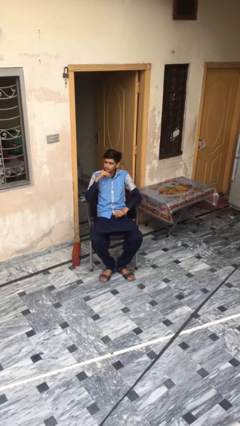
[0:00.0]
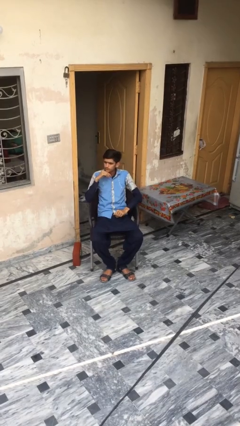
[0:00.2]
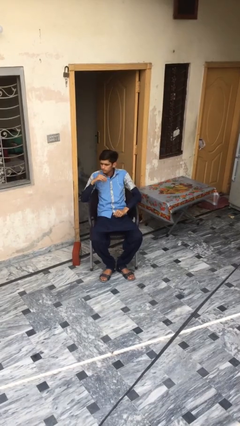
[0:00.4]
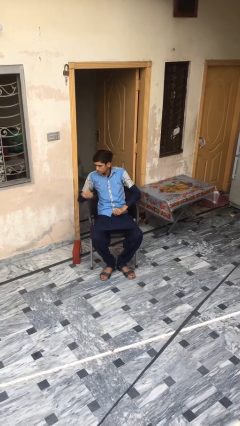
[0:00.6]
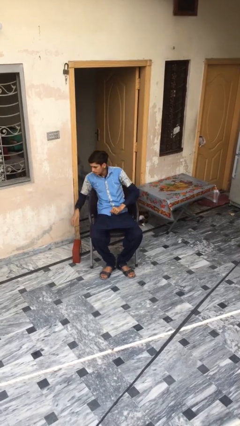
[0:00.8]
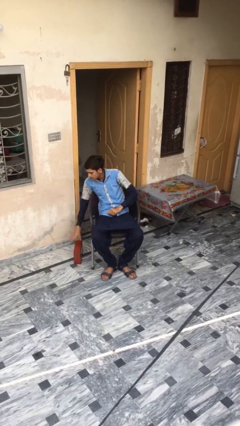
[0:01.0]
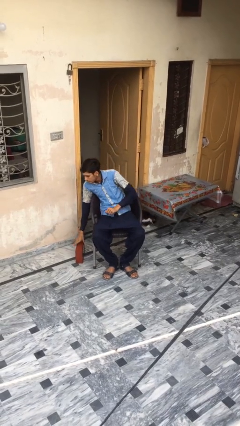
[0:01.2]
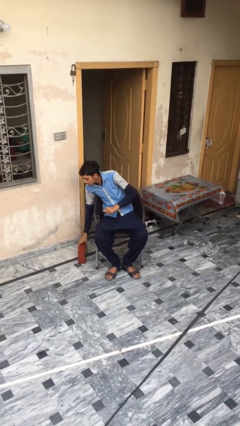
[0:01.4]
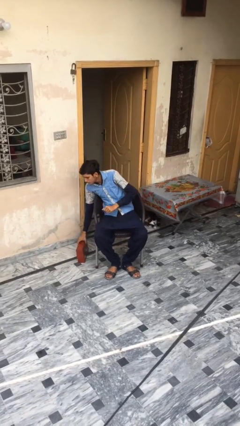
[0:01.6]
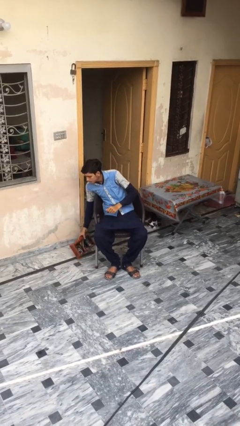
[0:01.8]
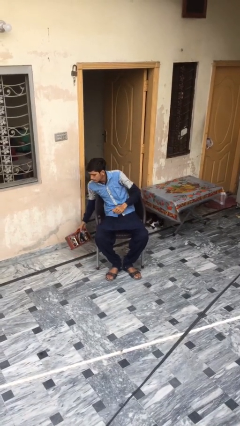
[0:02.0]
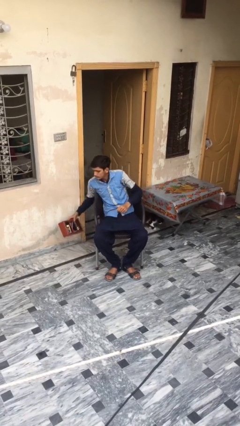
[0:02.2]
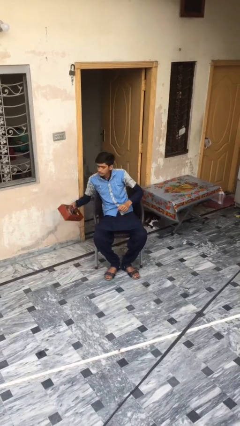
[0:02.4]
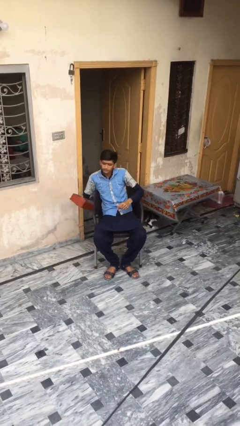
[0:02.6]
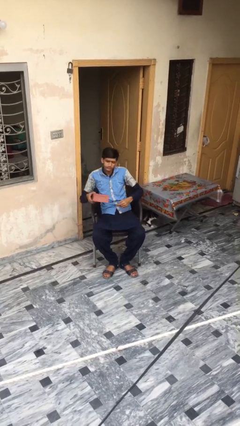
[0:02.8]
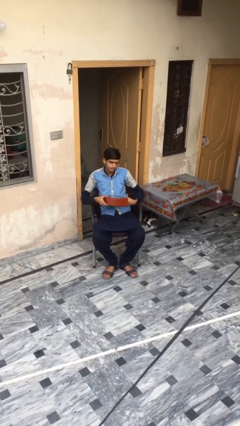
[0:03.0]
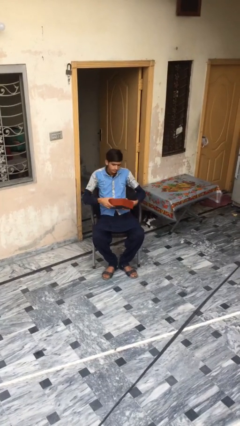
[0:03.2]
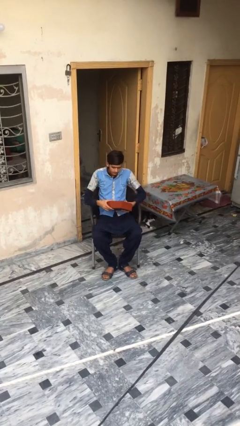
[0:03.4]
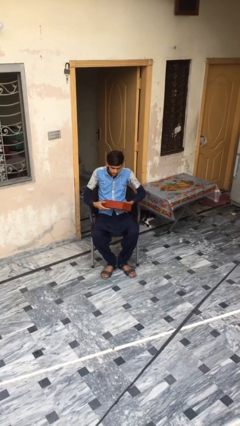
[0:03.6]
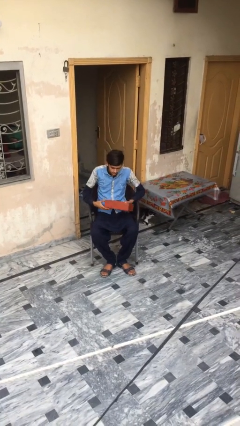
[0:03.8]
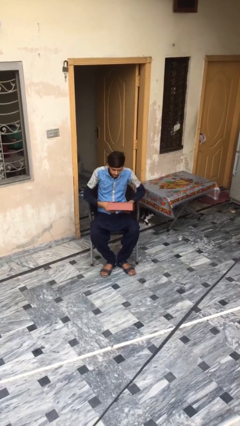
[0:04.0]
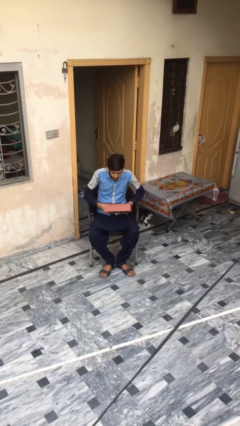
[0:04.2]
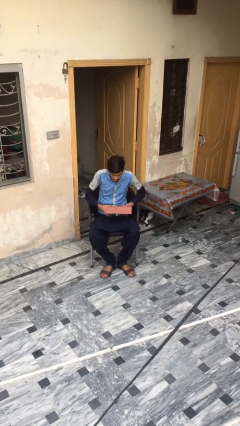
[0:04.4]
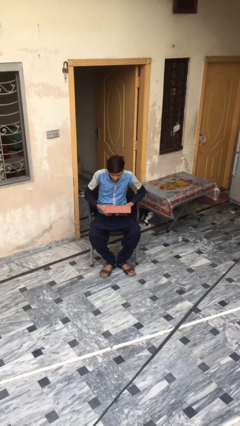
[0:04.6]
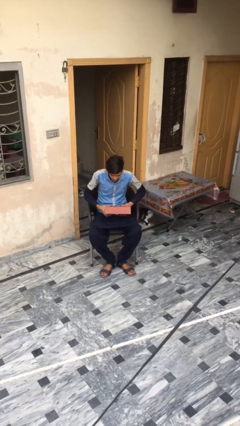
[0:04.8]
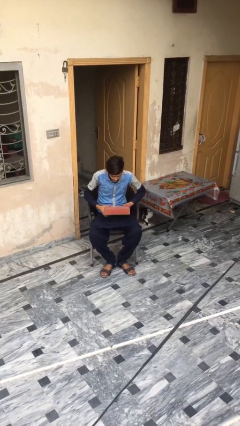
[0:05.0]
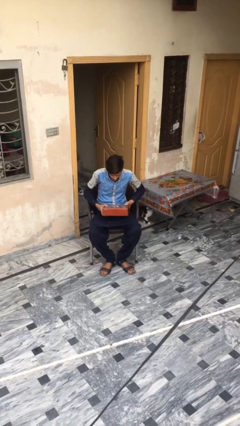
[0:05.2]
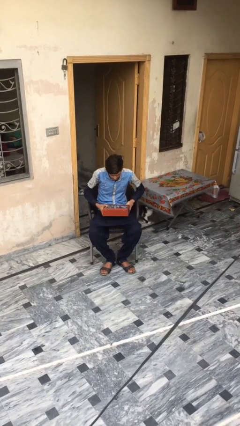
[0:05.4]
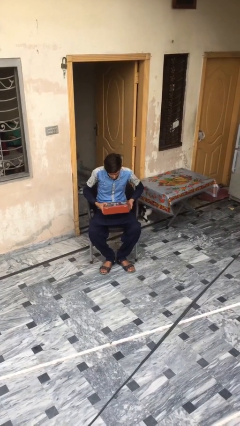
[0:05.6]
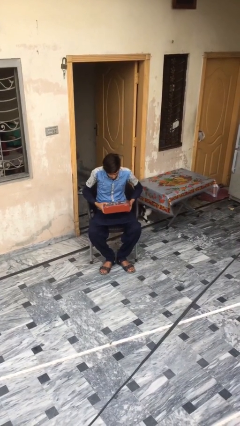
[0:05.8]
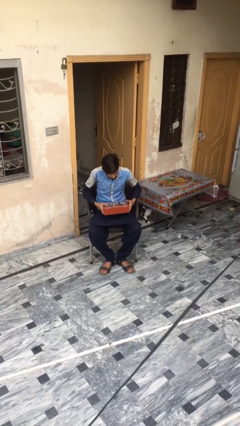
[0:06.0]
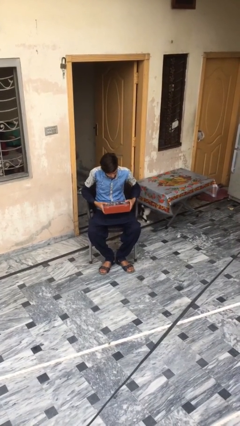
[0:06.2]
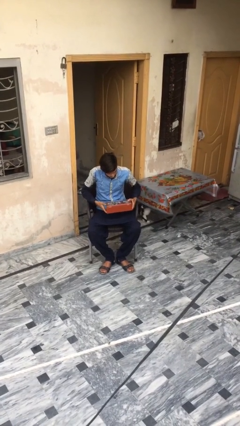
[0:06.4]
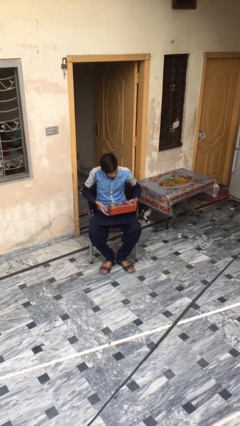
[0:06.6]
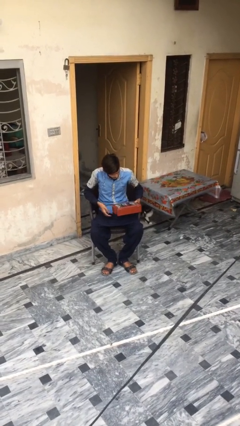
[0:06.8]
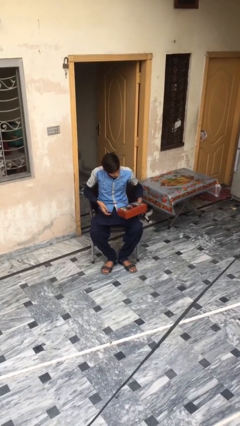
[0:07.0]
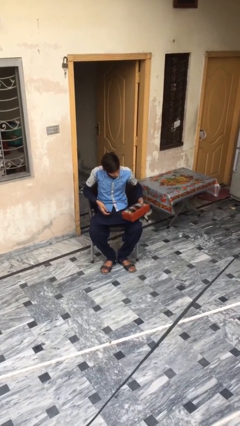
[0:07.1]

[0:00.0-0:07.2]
person picks up object from floor

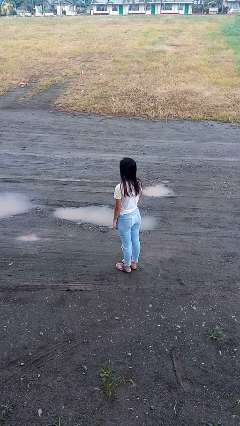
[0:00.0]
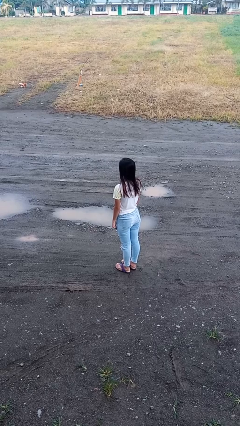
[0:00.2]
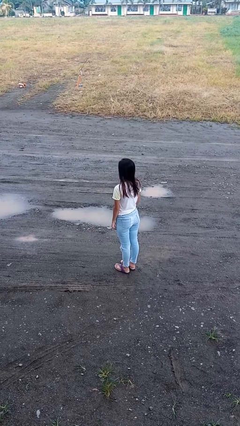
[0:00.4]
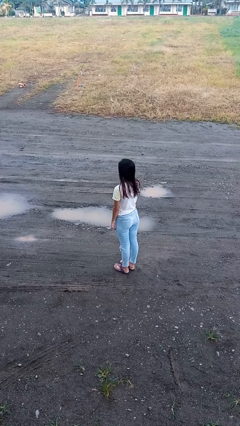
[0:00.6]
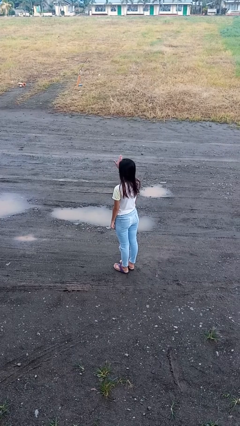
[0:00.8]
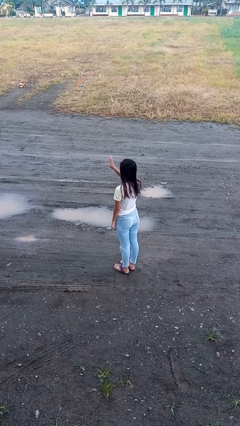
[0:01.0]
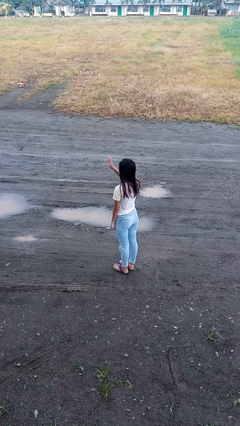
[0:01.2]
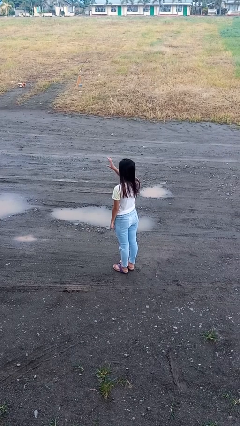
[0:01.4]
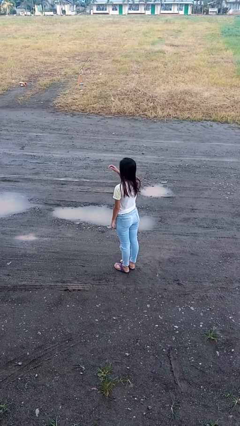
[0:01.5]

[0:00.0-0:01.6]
person gestures swipe left

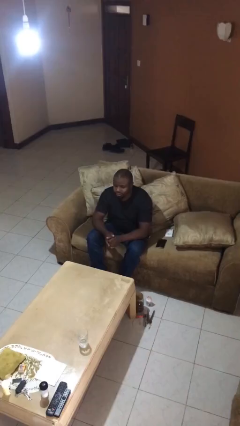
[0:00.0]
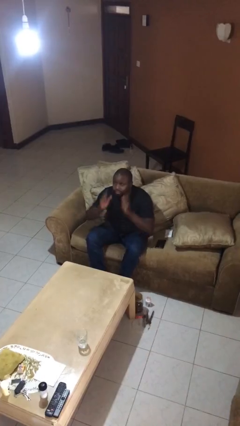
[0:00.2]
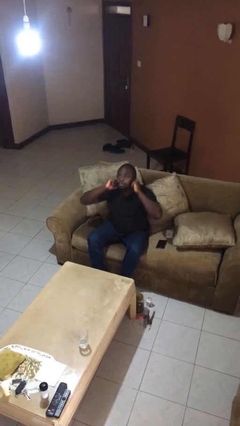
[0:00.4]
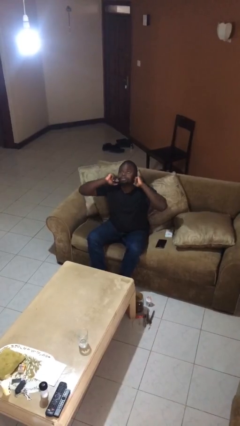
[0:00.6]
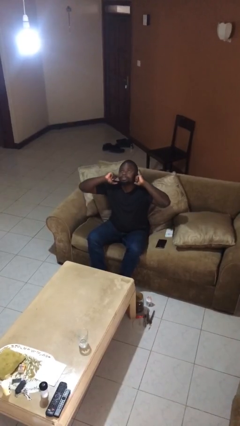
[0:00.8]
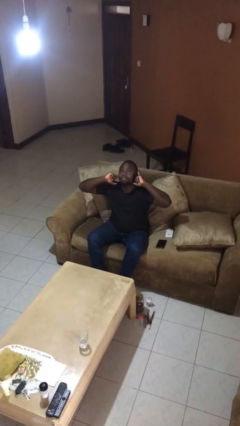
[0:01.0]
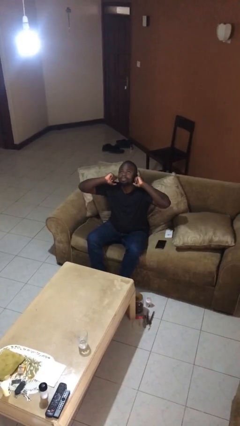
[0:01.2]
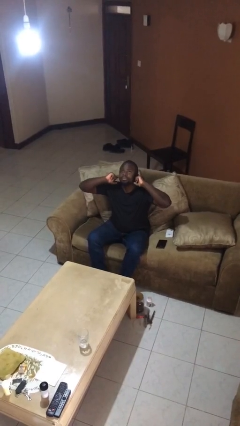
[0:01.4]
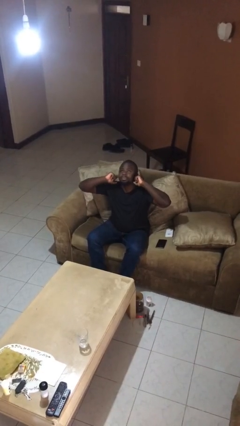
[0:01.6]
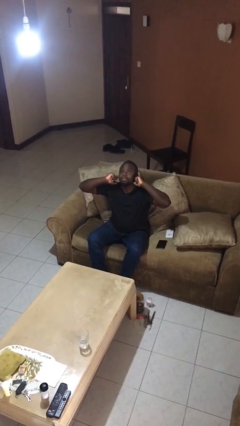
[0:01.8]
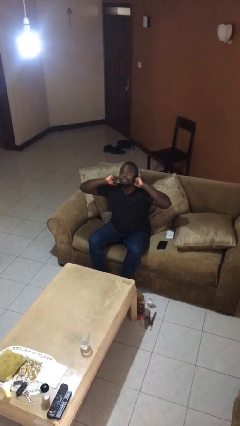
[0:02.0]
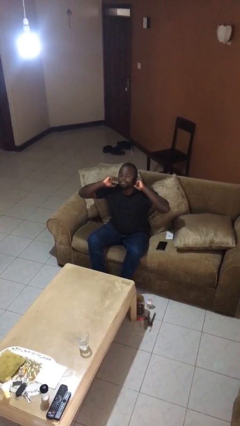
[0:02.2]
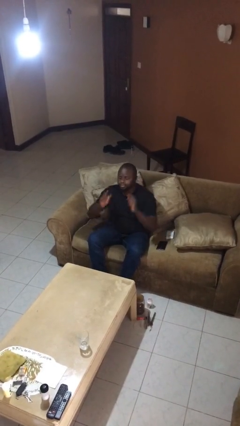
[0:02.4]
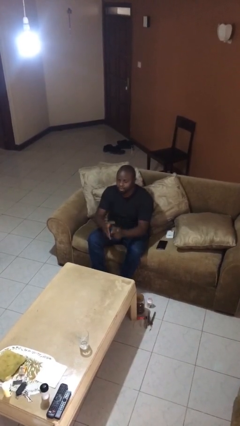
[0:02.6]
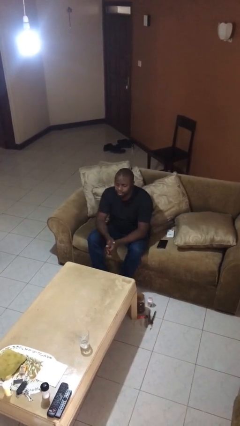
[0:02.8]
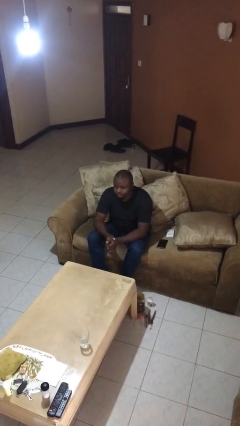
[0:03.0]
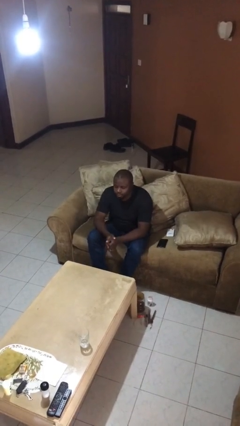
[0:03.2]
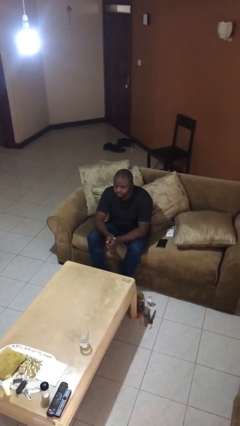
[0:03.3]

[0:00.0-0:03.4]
person puts fingers in ear

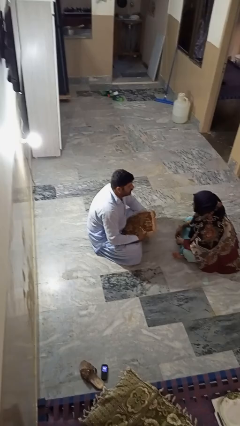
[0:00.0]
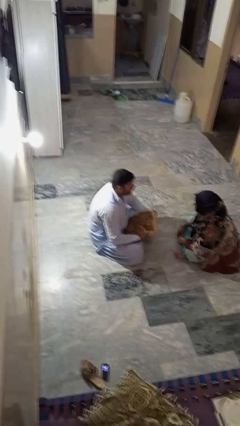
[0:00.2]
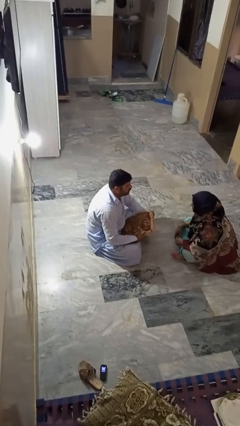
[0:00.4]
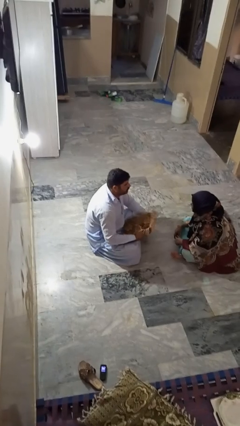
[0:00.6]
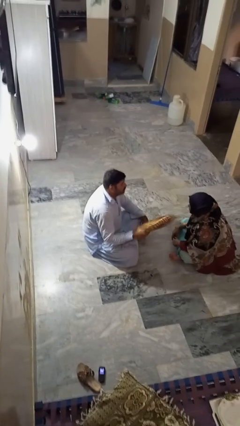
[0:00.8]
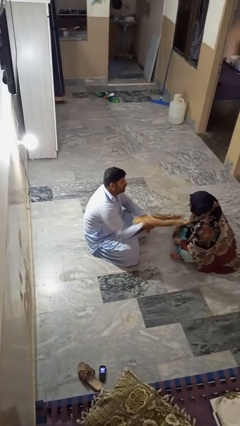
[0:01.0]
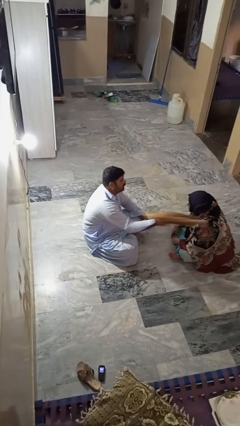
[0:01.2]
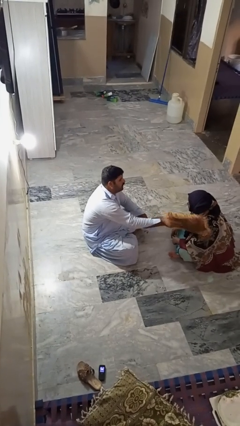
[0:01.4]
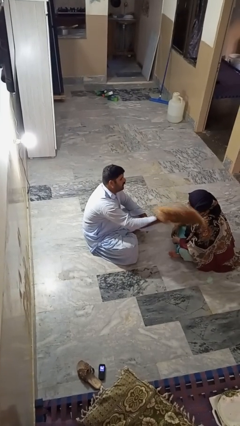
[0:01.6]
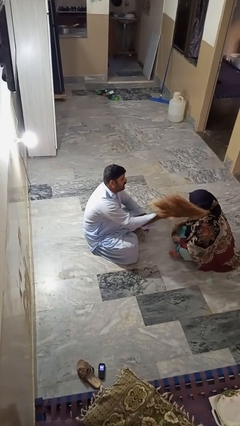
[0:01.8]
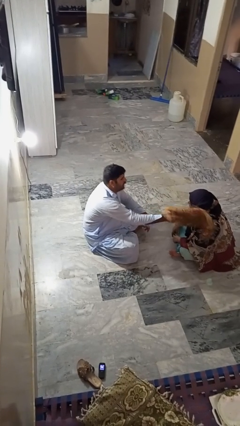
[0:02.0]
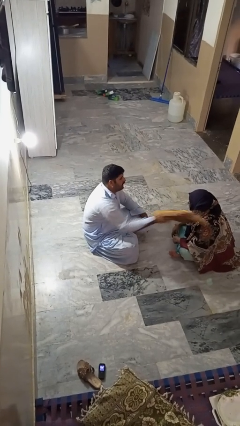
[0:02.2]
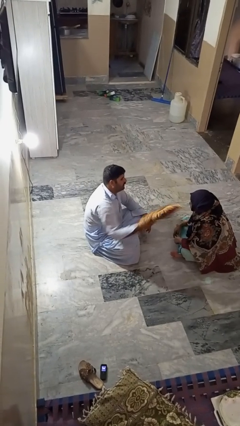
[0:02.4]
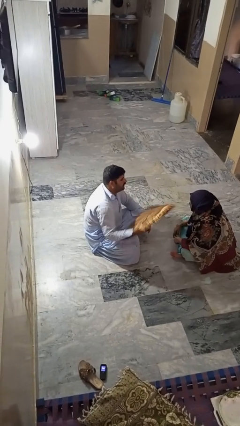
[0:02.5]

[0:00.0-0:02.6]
person hits person with pillow

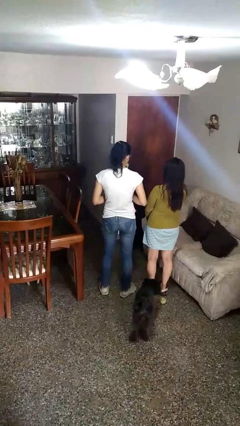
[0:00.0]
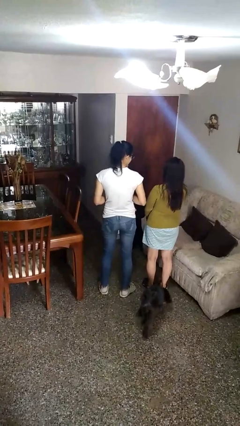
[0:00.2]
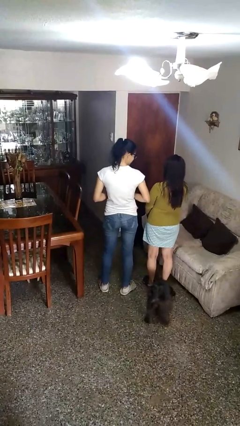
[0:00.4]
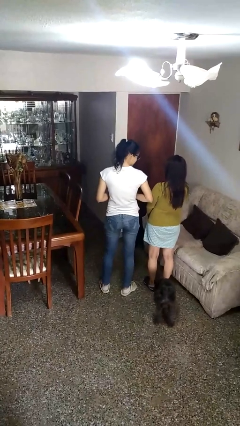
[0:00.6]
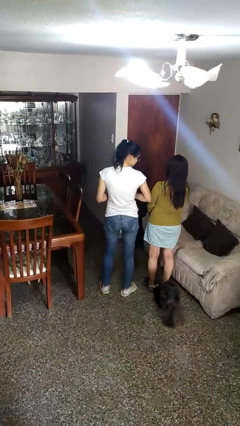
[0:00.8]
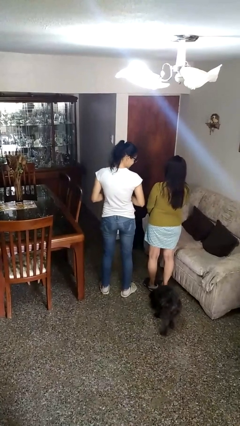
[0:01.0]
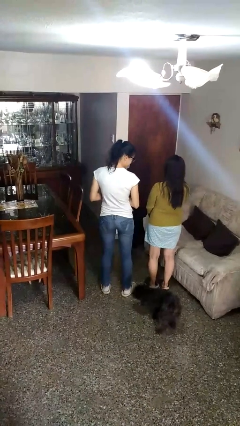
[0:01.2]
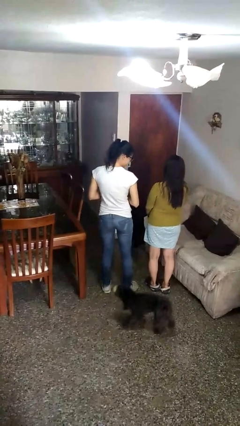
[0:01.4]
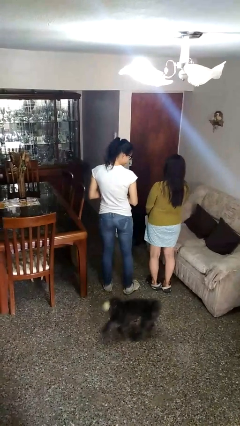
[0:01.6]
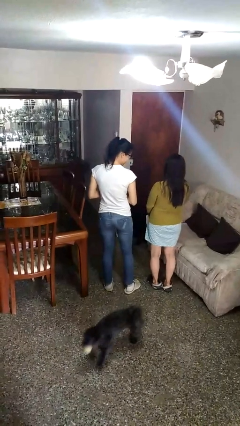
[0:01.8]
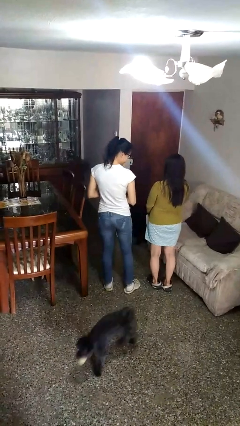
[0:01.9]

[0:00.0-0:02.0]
person nudges person with elbow

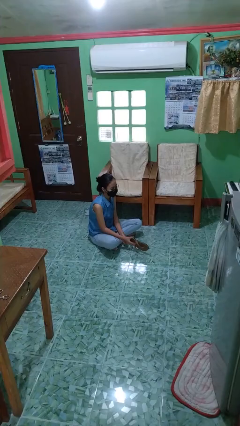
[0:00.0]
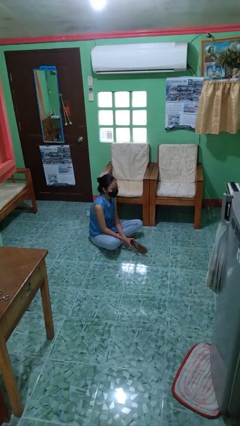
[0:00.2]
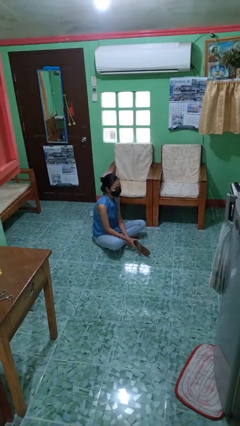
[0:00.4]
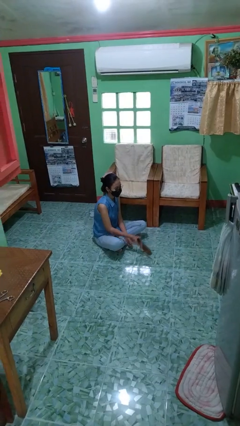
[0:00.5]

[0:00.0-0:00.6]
person throws object into air

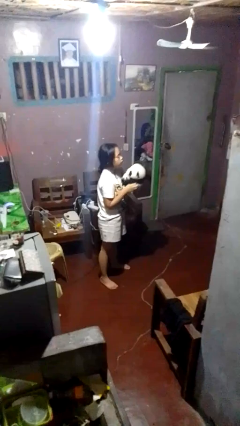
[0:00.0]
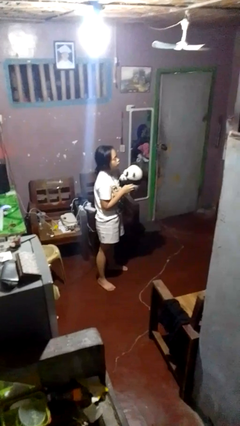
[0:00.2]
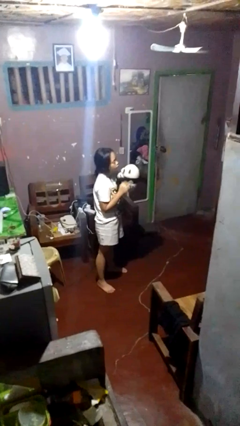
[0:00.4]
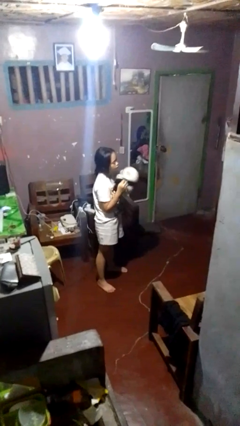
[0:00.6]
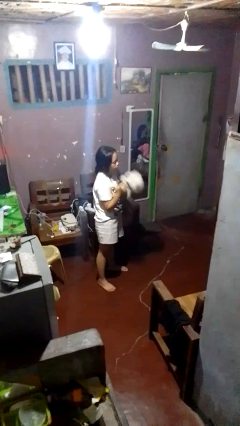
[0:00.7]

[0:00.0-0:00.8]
person drops object
